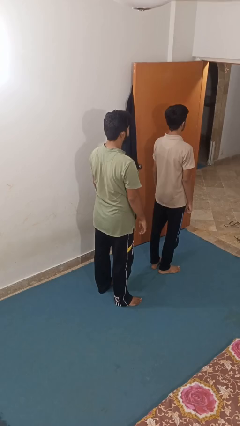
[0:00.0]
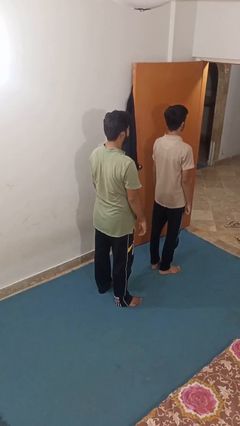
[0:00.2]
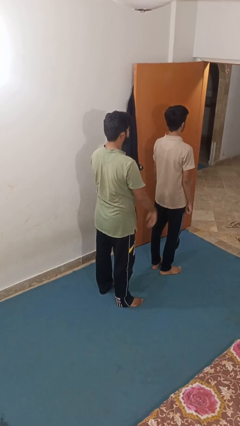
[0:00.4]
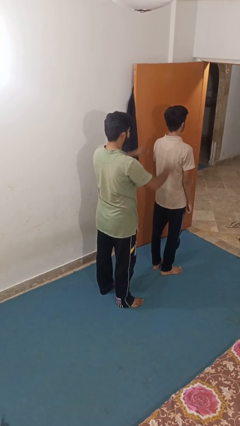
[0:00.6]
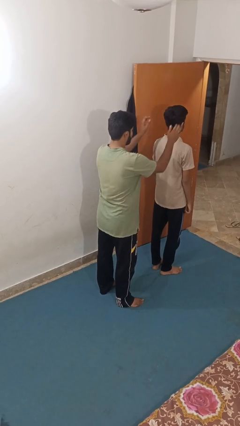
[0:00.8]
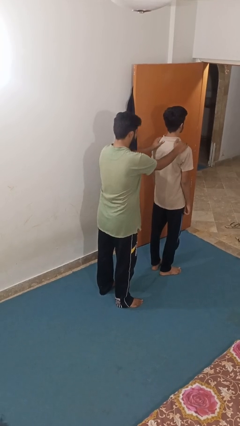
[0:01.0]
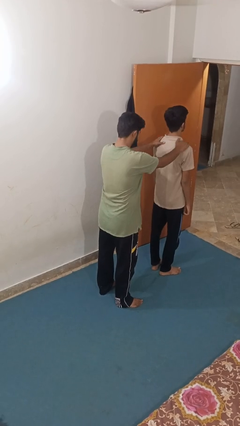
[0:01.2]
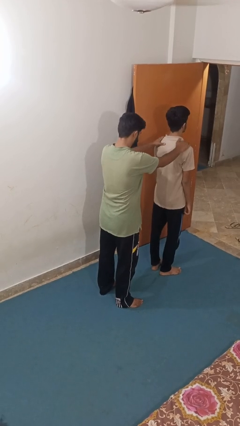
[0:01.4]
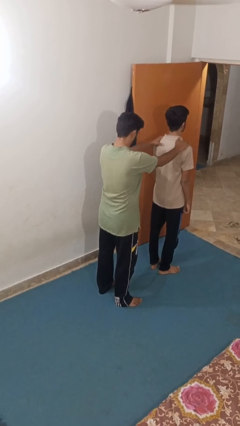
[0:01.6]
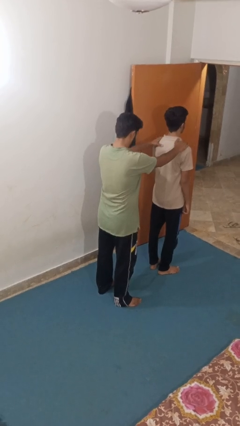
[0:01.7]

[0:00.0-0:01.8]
person grabs person by shoulder

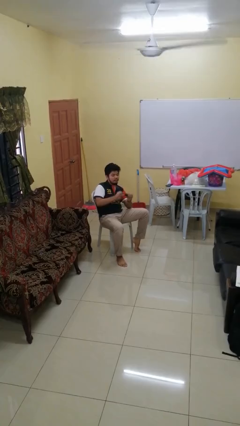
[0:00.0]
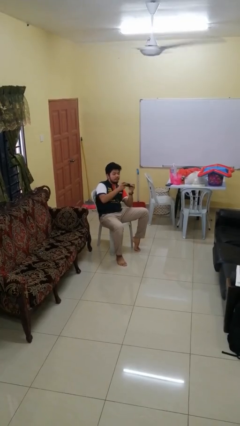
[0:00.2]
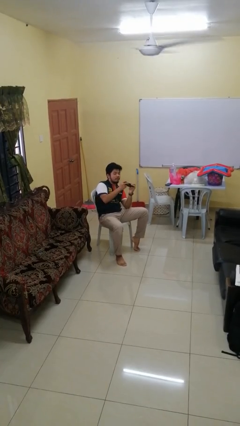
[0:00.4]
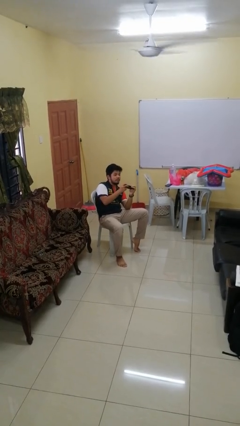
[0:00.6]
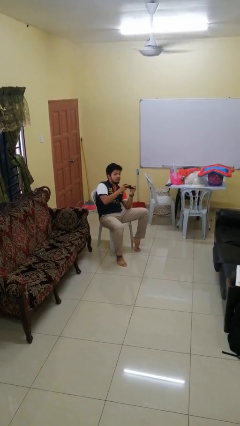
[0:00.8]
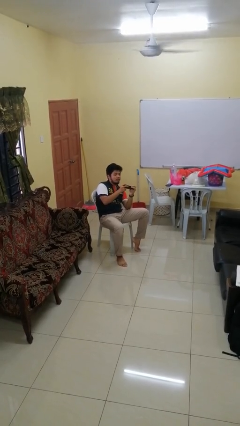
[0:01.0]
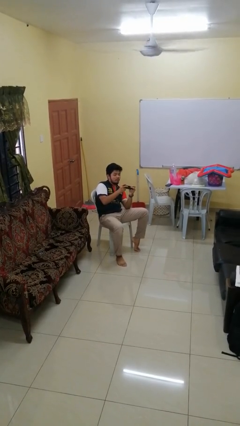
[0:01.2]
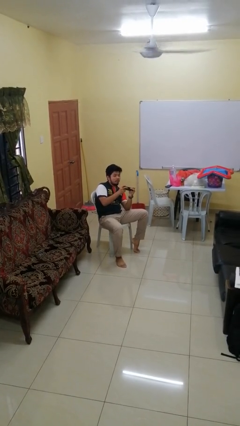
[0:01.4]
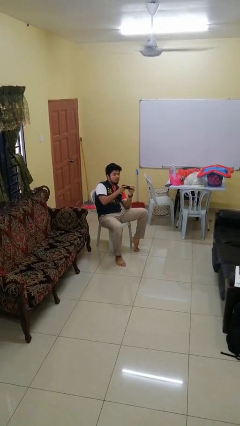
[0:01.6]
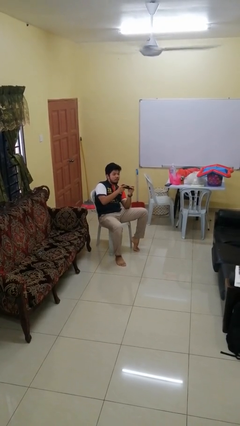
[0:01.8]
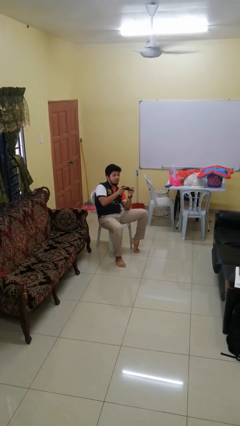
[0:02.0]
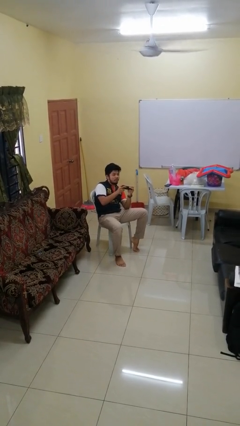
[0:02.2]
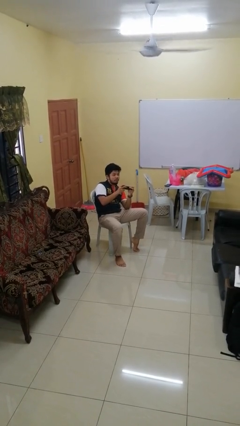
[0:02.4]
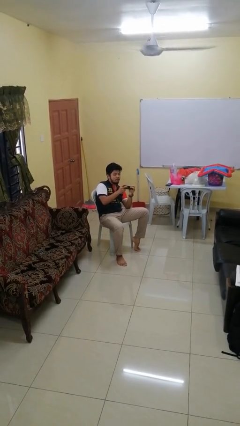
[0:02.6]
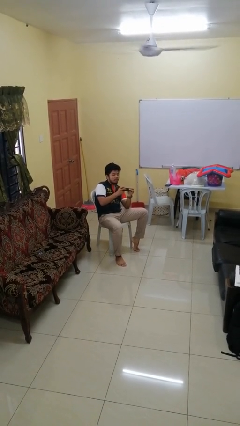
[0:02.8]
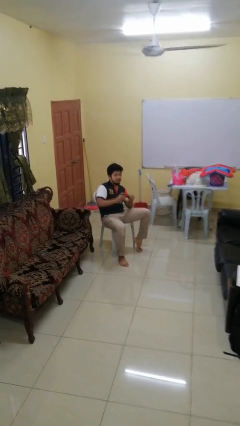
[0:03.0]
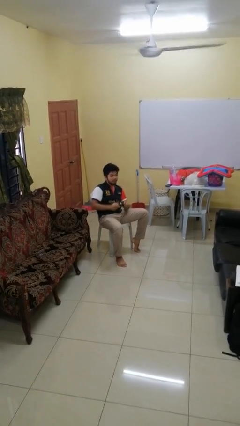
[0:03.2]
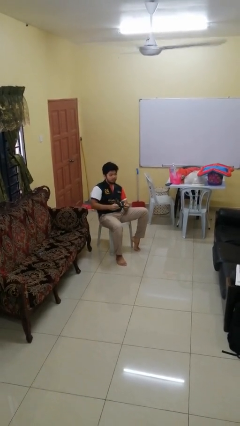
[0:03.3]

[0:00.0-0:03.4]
person interacts with handheld game

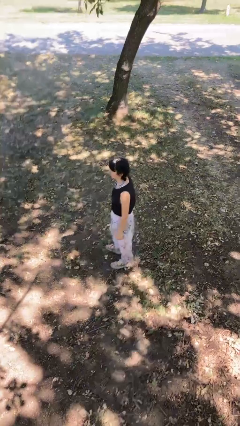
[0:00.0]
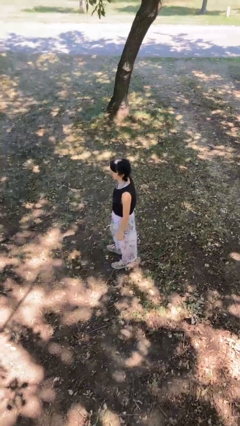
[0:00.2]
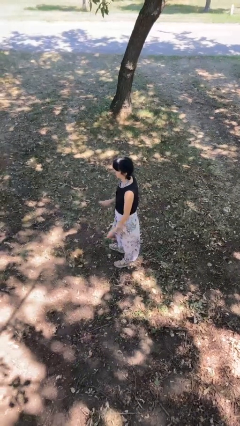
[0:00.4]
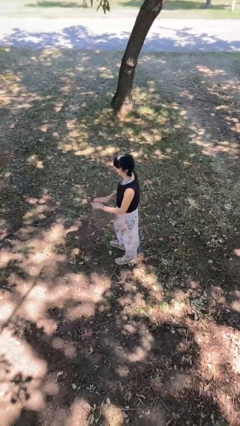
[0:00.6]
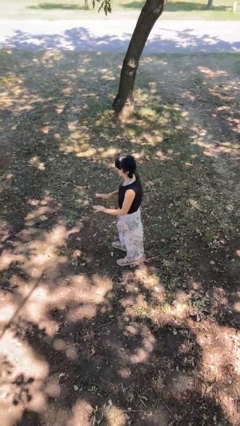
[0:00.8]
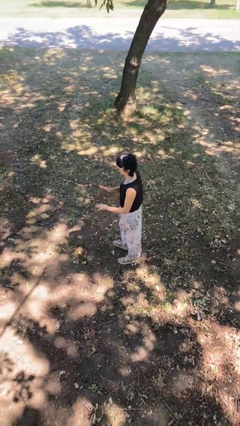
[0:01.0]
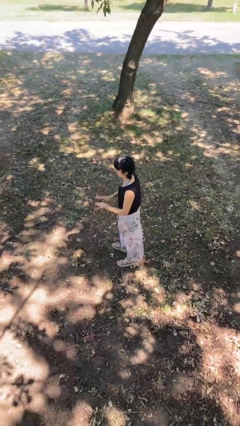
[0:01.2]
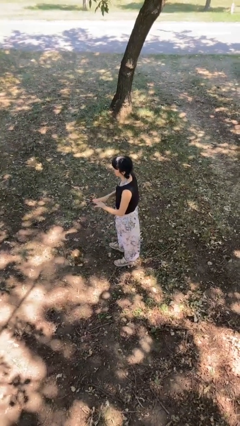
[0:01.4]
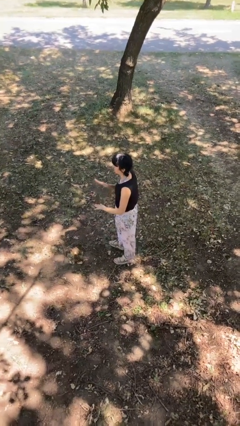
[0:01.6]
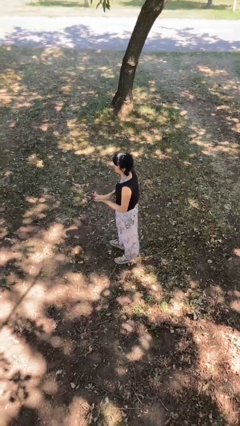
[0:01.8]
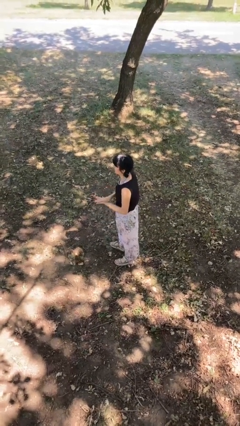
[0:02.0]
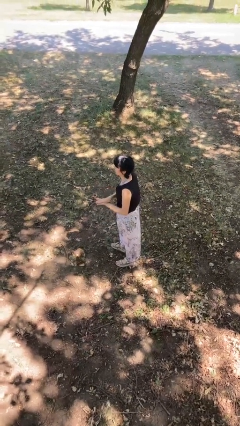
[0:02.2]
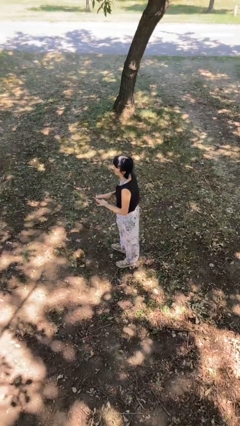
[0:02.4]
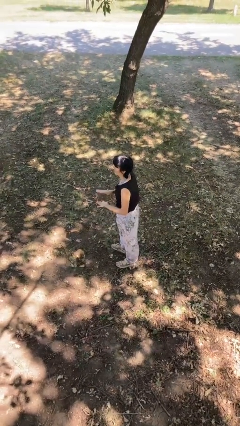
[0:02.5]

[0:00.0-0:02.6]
person claps hands

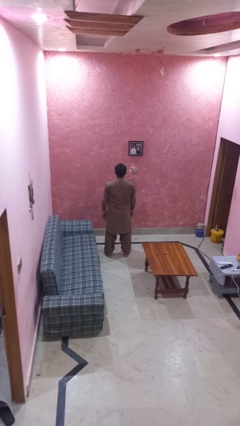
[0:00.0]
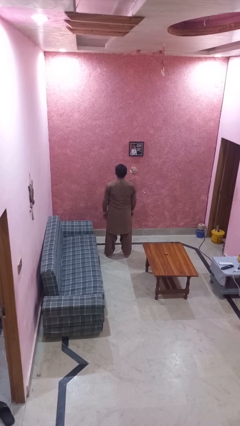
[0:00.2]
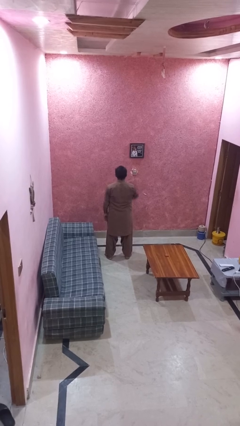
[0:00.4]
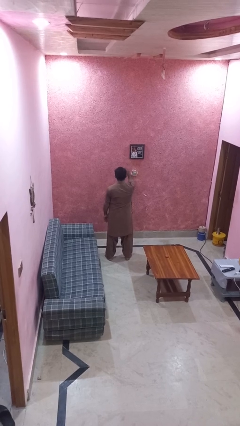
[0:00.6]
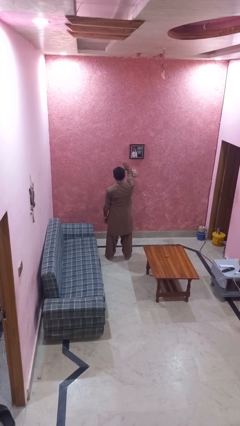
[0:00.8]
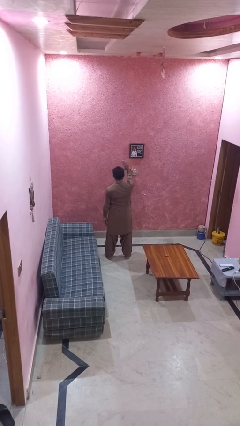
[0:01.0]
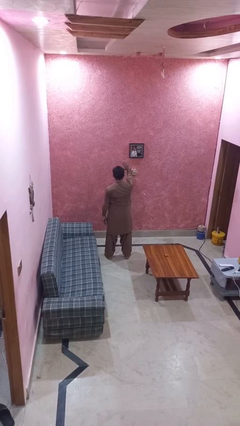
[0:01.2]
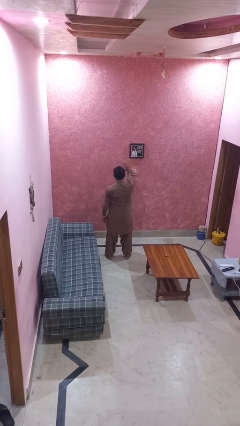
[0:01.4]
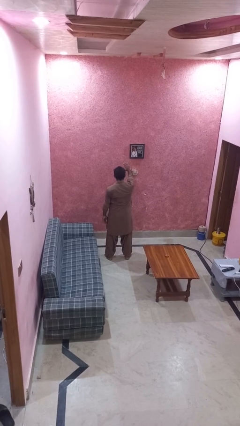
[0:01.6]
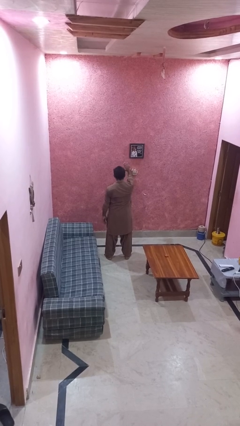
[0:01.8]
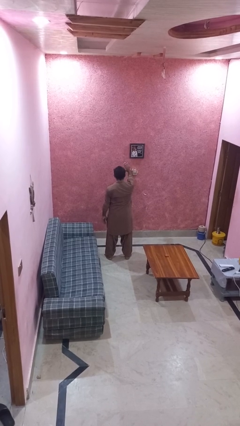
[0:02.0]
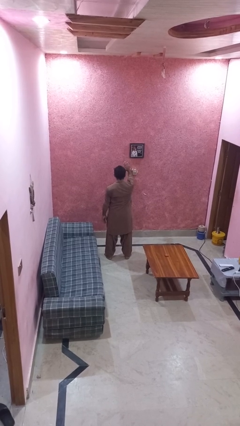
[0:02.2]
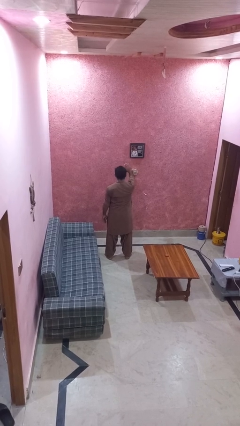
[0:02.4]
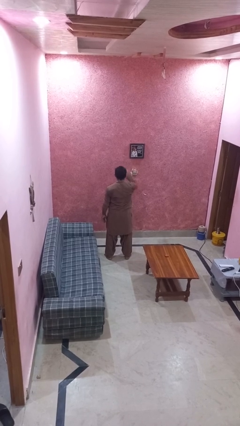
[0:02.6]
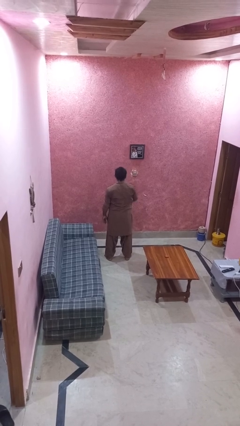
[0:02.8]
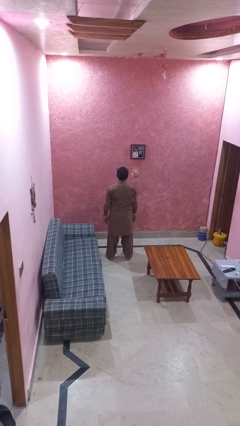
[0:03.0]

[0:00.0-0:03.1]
person gestures stop

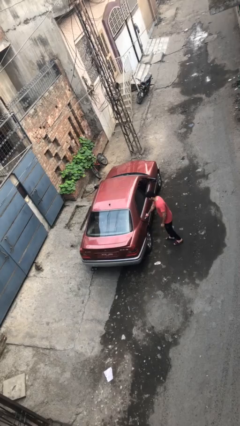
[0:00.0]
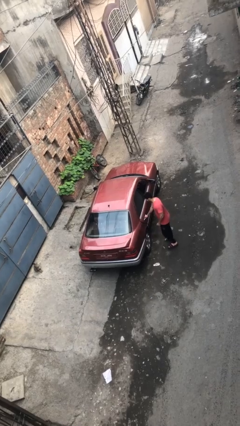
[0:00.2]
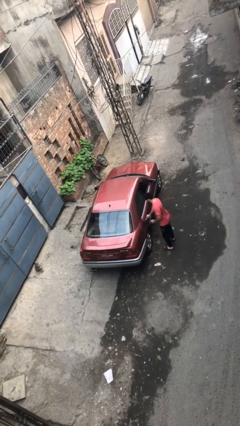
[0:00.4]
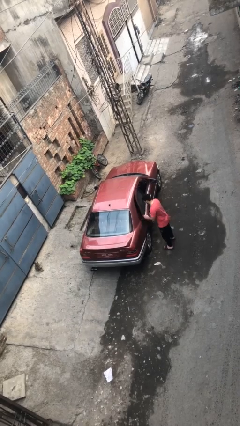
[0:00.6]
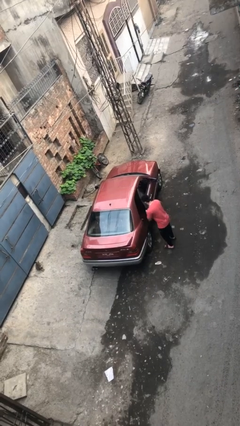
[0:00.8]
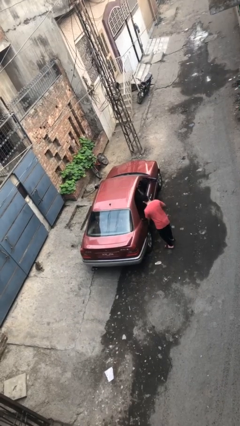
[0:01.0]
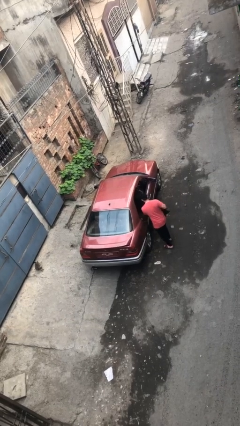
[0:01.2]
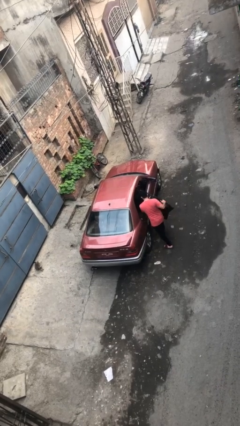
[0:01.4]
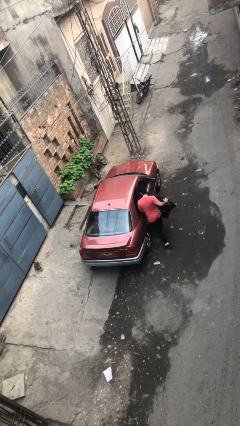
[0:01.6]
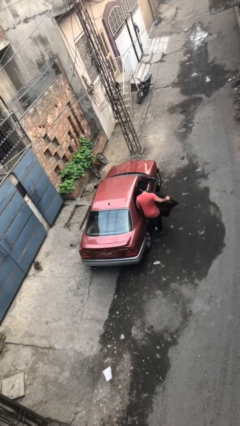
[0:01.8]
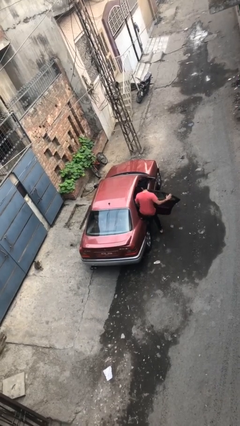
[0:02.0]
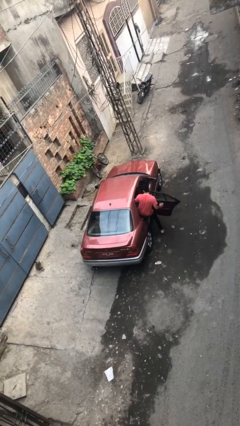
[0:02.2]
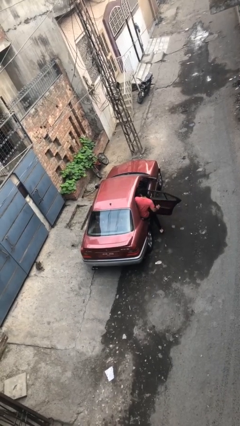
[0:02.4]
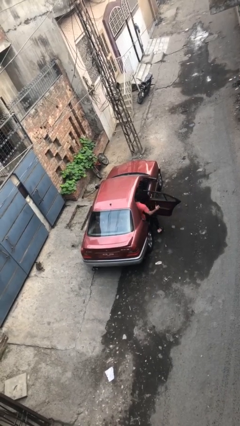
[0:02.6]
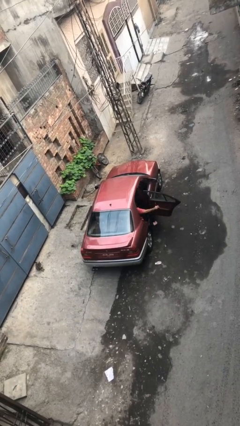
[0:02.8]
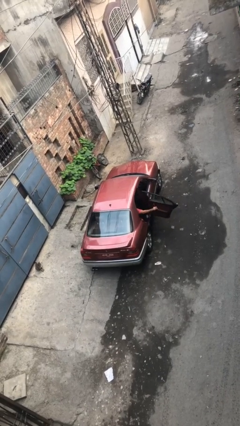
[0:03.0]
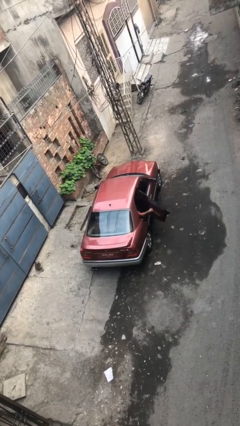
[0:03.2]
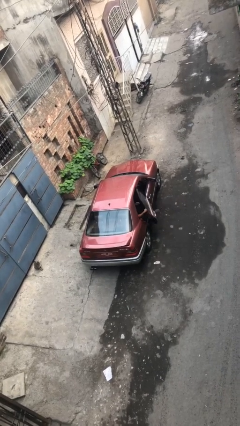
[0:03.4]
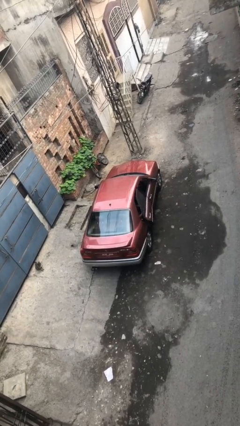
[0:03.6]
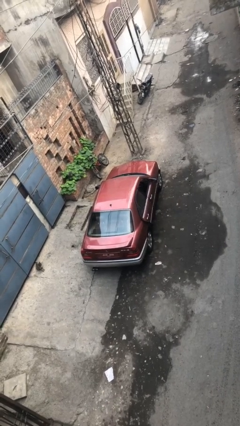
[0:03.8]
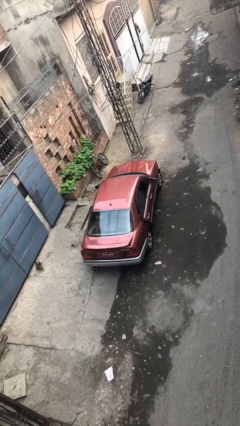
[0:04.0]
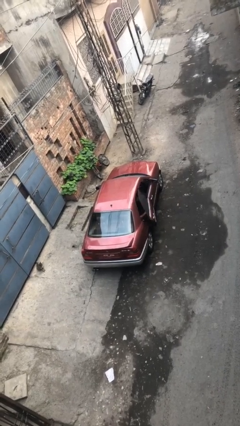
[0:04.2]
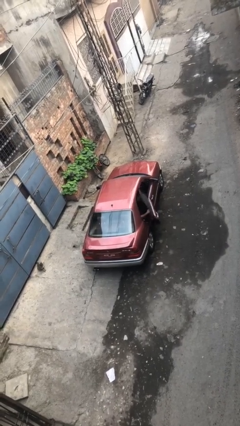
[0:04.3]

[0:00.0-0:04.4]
car picks up person

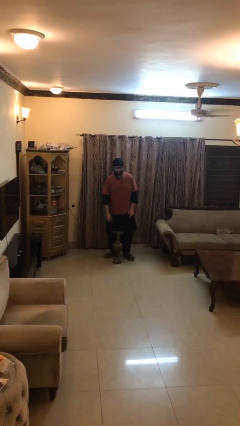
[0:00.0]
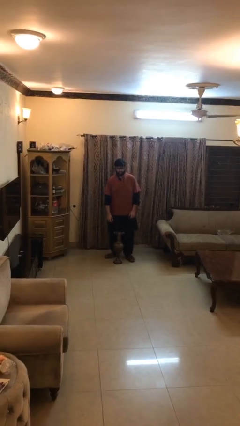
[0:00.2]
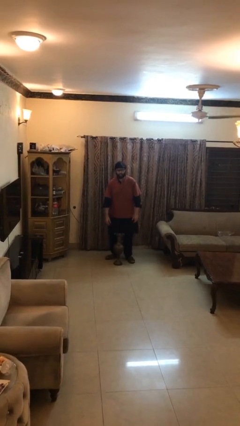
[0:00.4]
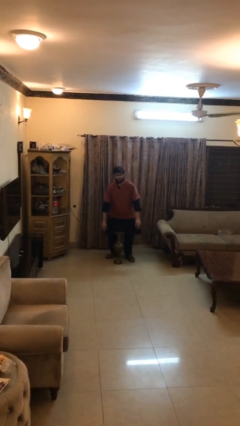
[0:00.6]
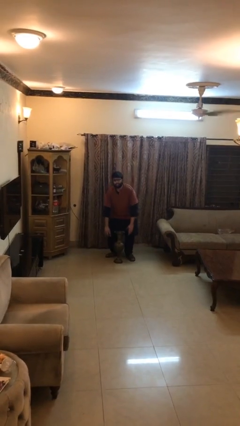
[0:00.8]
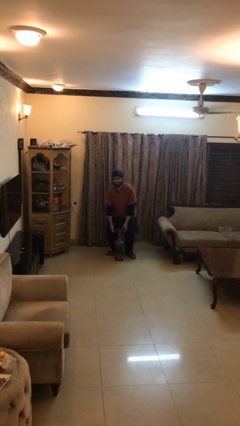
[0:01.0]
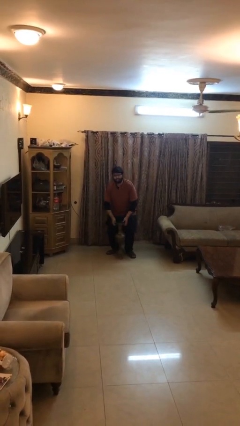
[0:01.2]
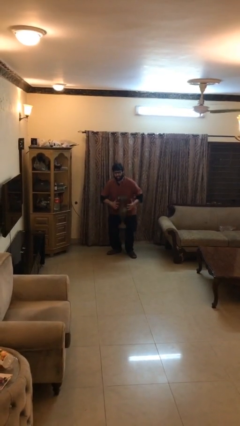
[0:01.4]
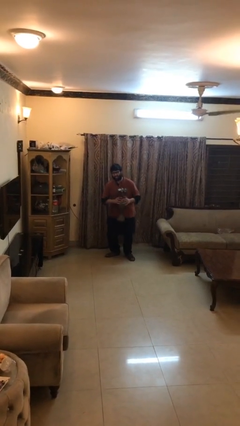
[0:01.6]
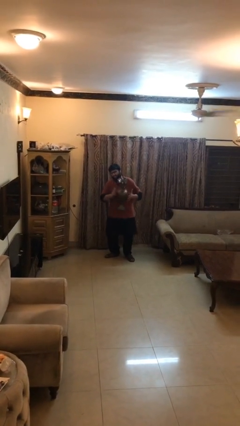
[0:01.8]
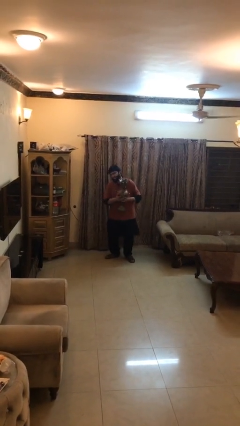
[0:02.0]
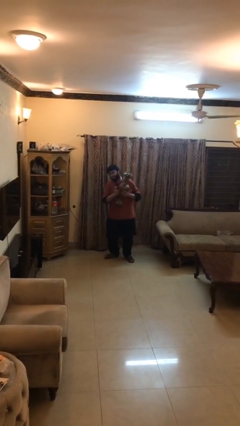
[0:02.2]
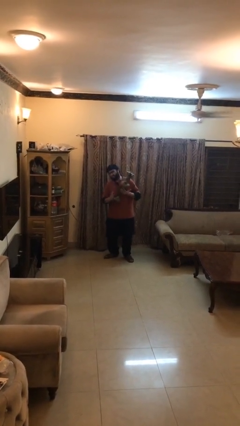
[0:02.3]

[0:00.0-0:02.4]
person picks up object from floor
